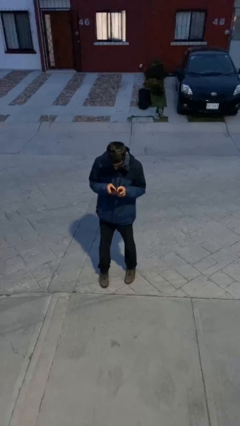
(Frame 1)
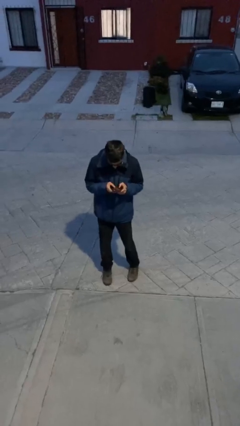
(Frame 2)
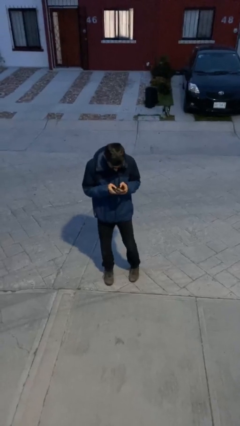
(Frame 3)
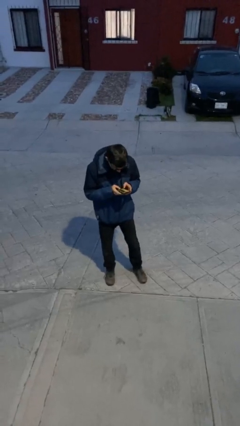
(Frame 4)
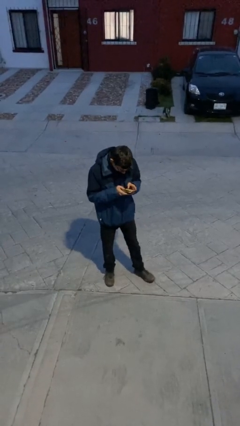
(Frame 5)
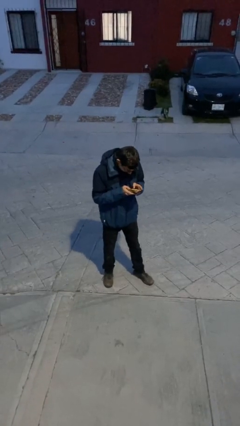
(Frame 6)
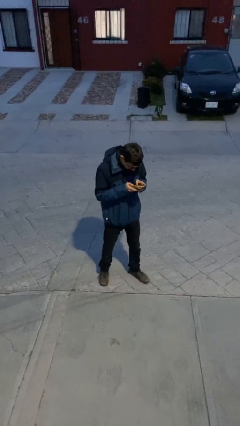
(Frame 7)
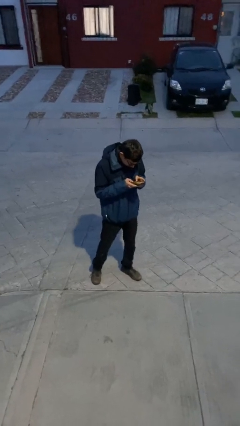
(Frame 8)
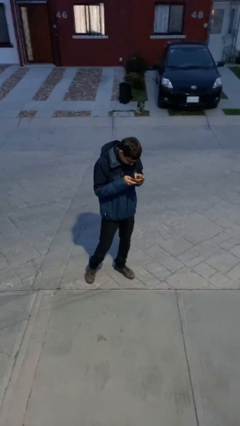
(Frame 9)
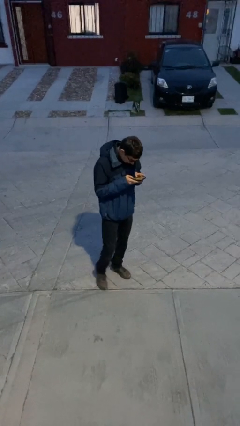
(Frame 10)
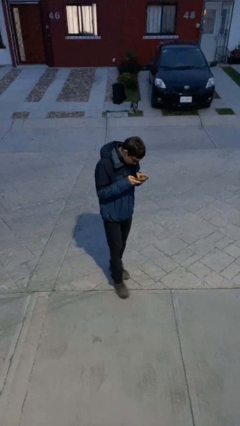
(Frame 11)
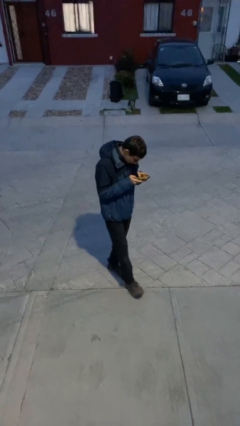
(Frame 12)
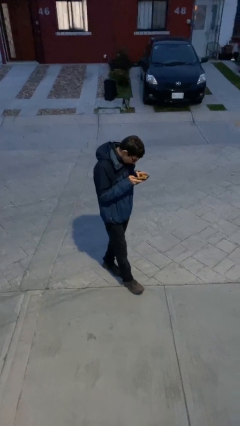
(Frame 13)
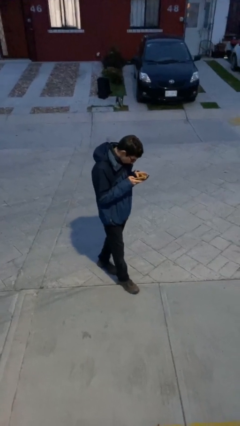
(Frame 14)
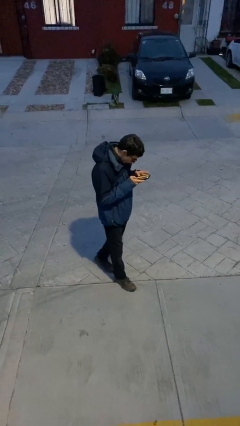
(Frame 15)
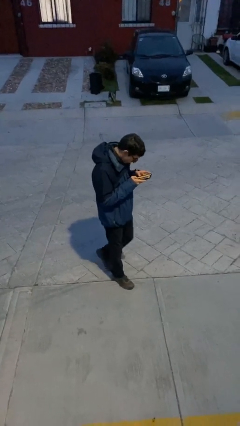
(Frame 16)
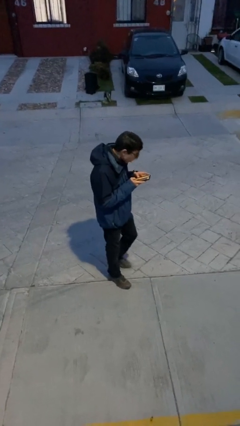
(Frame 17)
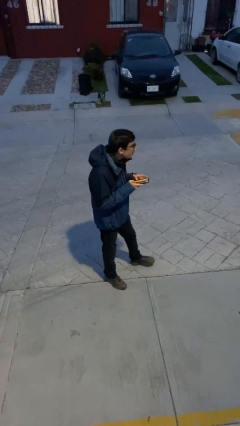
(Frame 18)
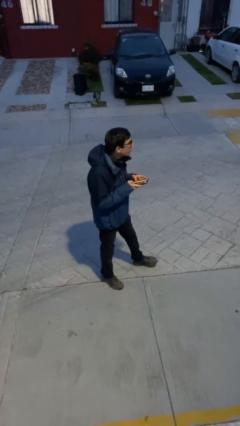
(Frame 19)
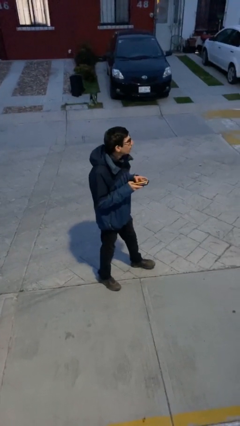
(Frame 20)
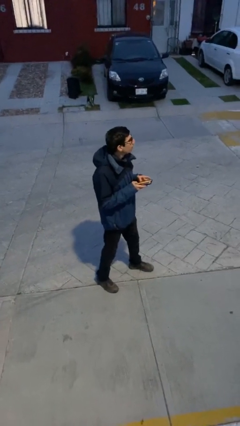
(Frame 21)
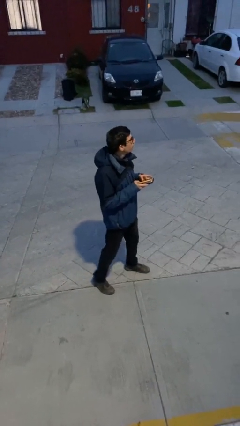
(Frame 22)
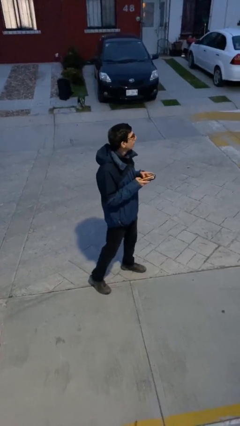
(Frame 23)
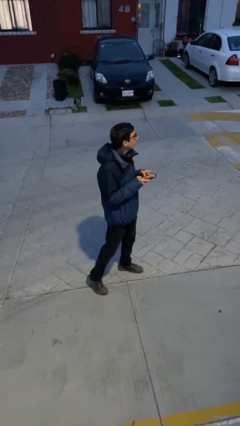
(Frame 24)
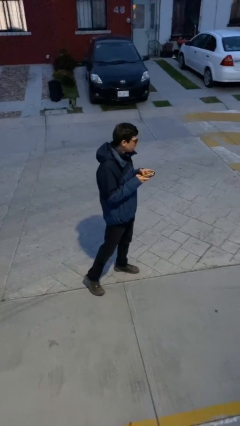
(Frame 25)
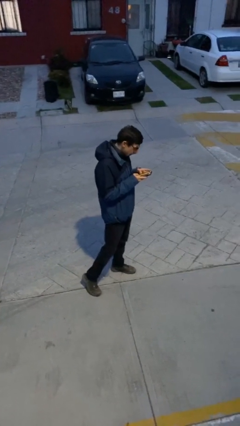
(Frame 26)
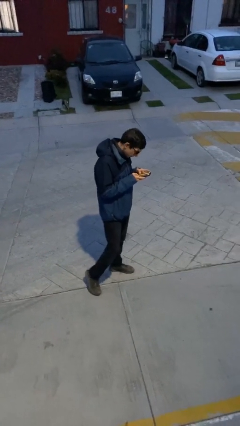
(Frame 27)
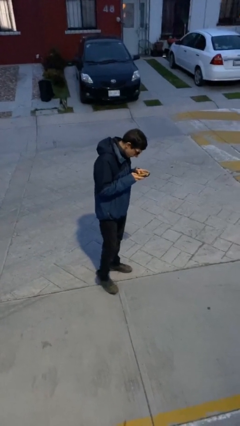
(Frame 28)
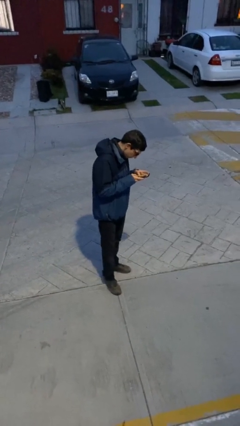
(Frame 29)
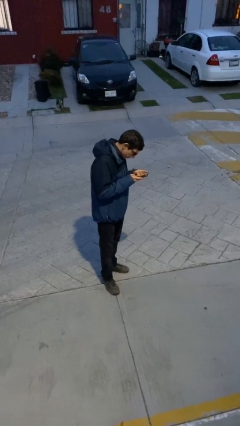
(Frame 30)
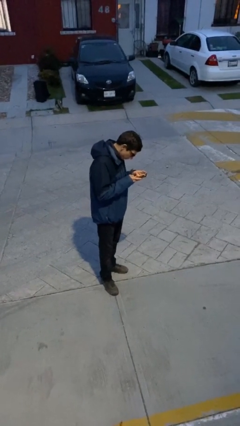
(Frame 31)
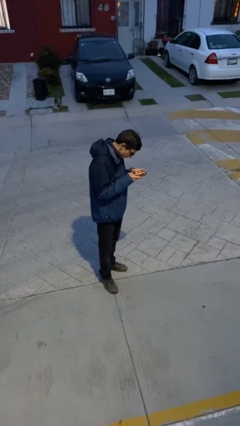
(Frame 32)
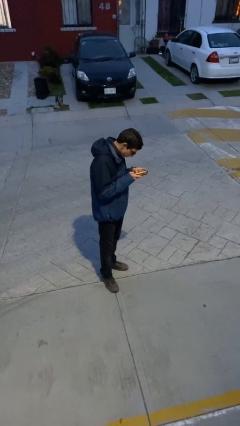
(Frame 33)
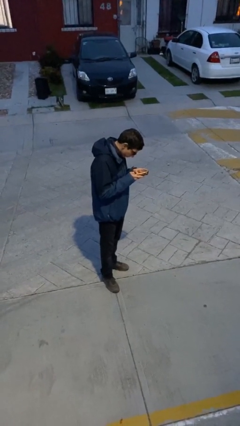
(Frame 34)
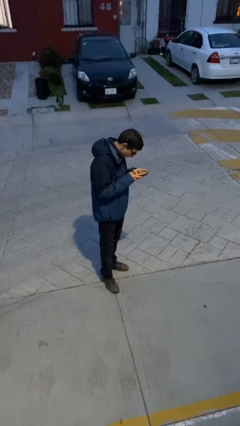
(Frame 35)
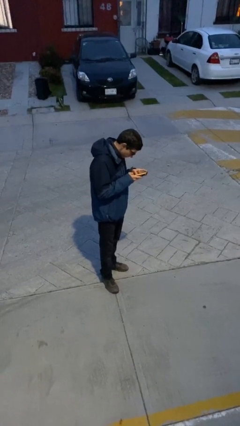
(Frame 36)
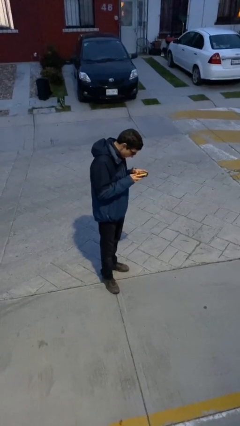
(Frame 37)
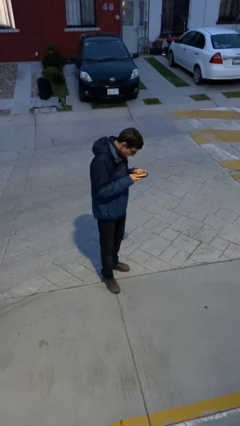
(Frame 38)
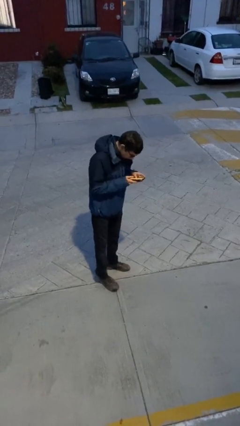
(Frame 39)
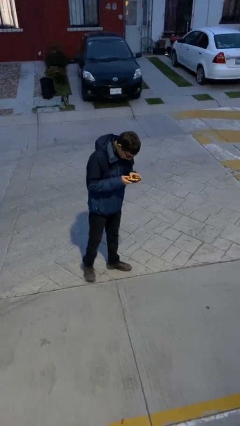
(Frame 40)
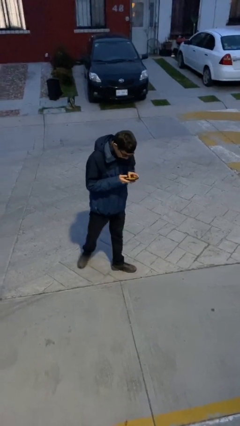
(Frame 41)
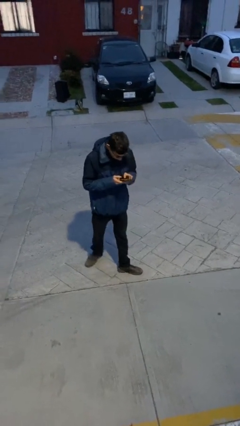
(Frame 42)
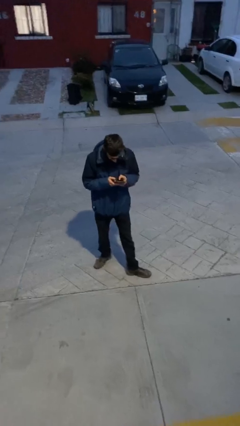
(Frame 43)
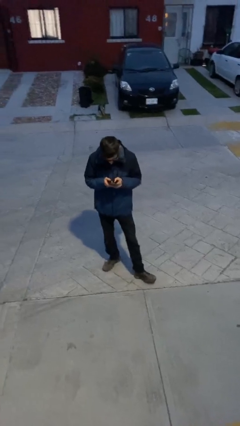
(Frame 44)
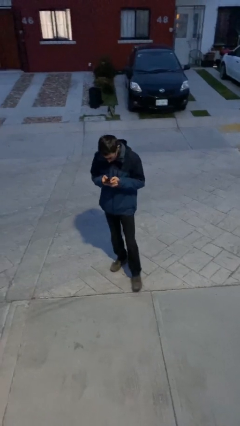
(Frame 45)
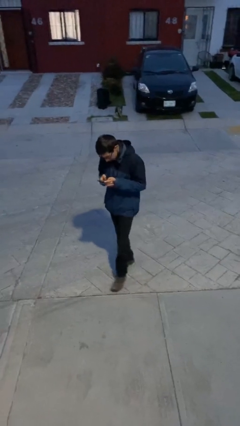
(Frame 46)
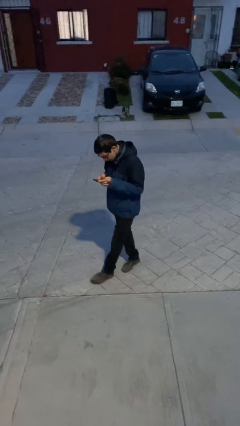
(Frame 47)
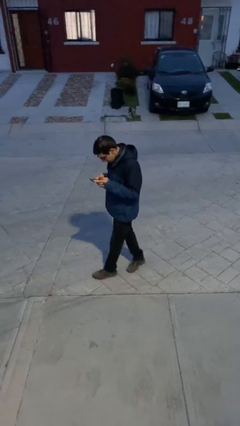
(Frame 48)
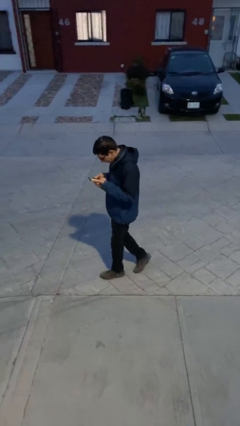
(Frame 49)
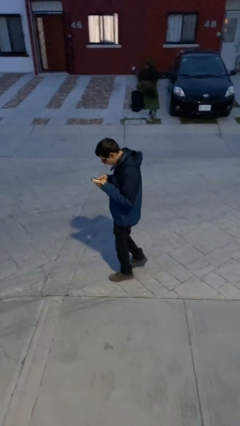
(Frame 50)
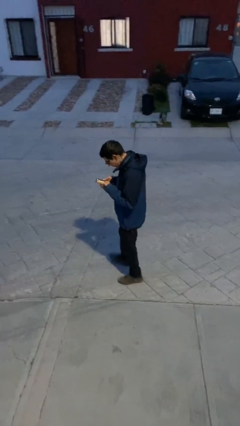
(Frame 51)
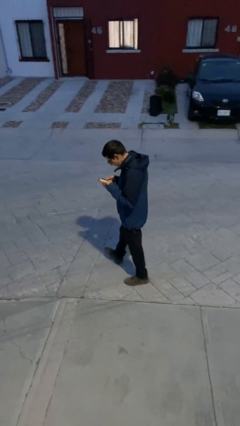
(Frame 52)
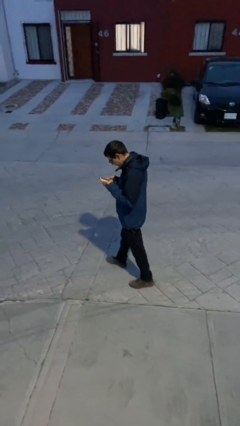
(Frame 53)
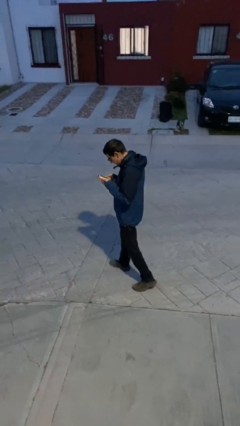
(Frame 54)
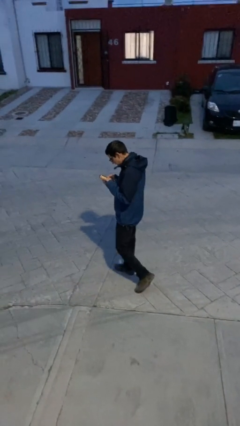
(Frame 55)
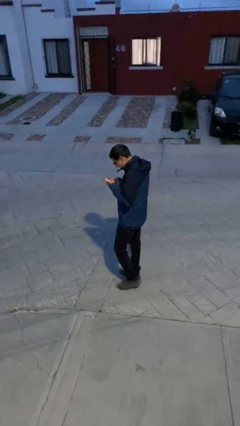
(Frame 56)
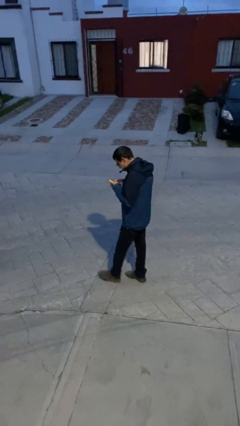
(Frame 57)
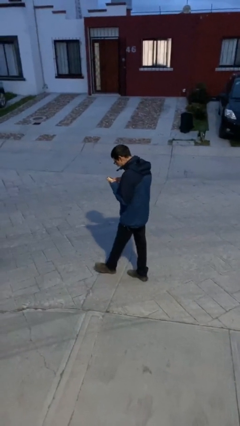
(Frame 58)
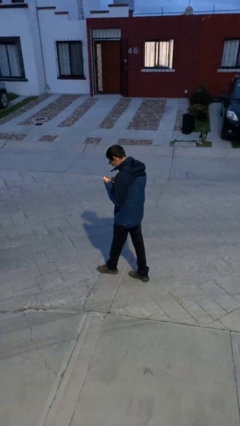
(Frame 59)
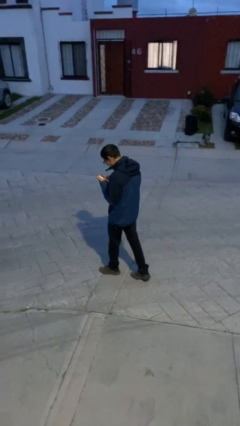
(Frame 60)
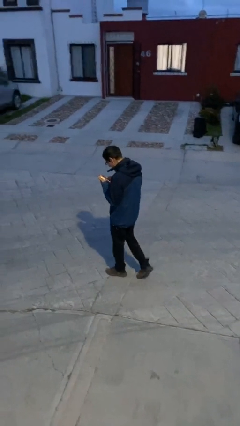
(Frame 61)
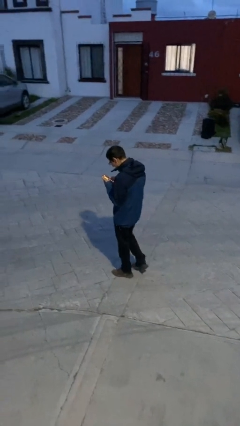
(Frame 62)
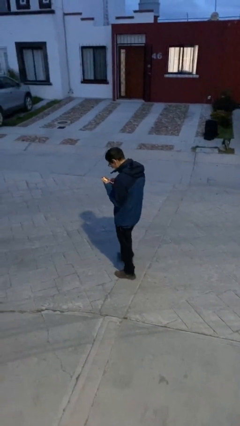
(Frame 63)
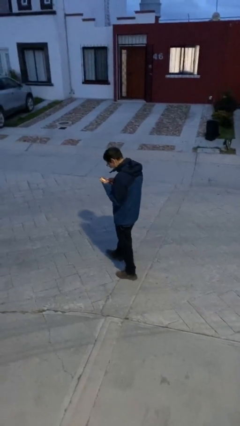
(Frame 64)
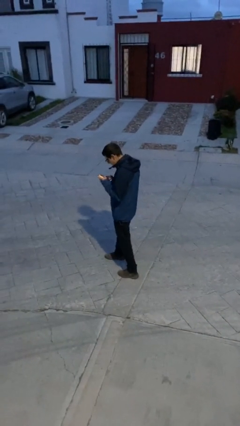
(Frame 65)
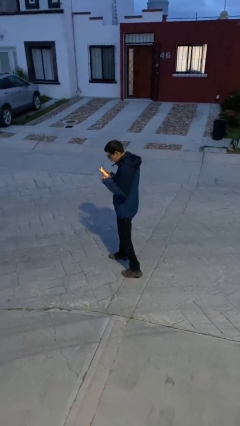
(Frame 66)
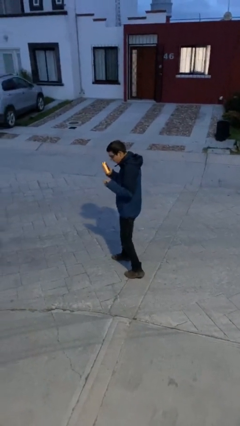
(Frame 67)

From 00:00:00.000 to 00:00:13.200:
person texts on phone

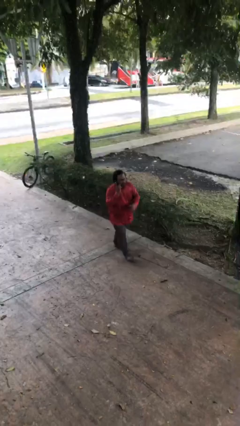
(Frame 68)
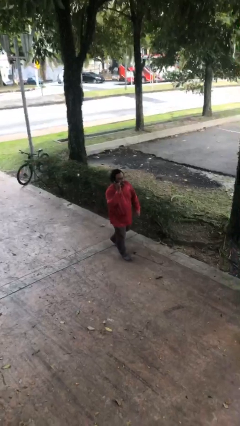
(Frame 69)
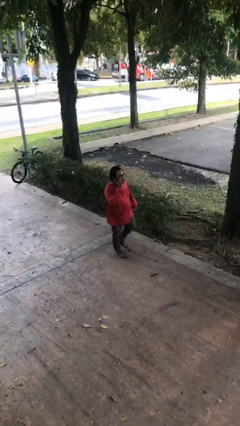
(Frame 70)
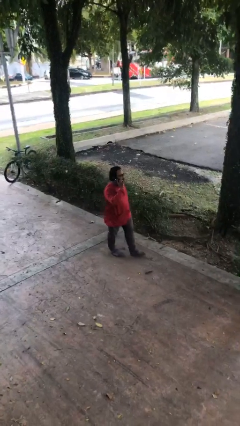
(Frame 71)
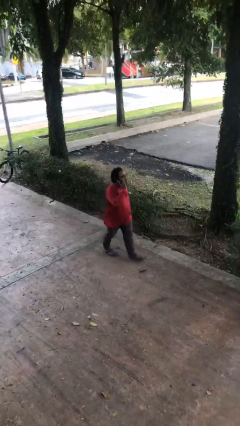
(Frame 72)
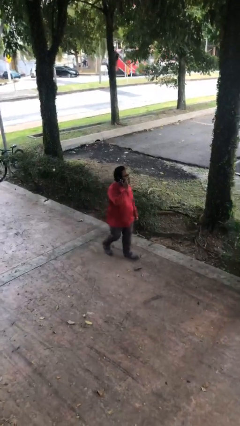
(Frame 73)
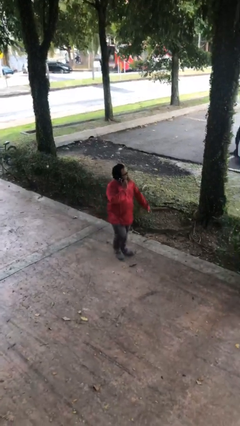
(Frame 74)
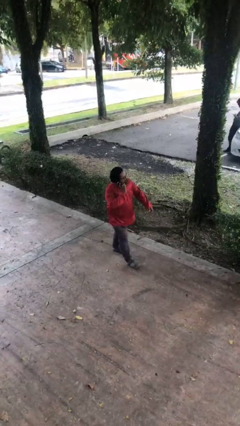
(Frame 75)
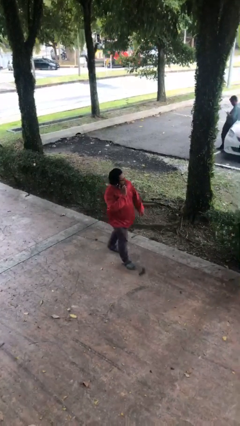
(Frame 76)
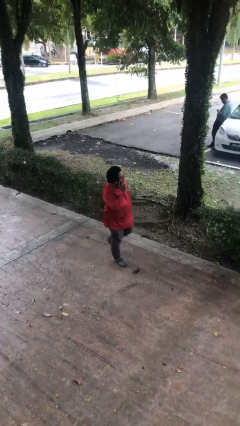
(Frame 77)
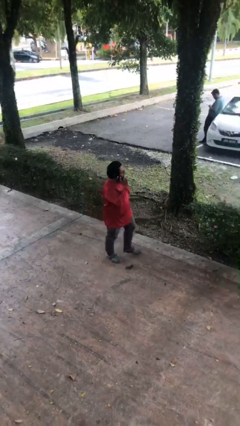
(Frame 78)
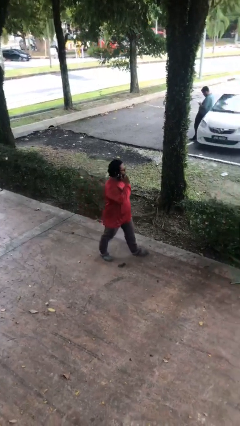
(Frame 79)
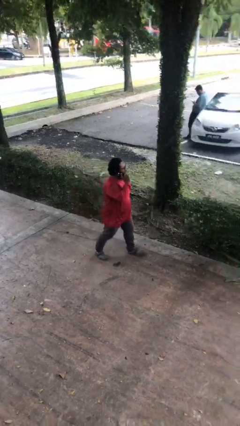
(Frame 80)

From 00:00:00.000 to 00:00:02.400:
person talks on phone

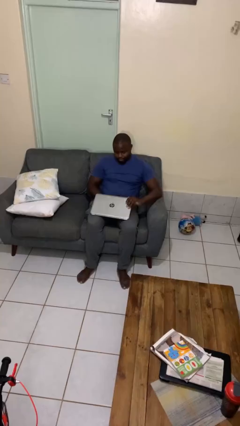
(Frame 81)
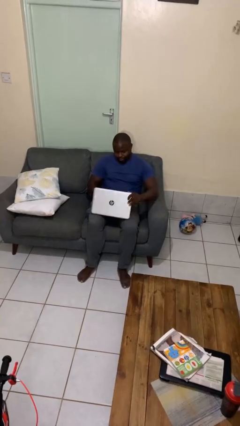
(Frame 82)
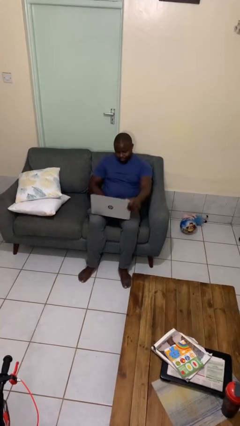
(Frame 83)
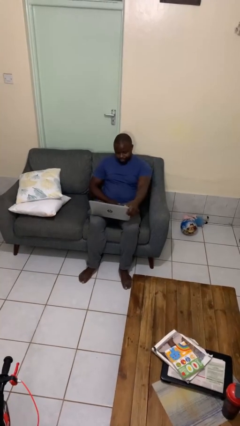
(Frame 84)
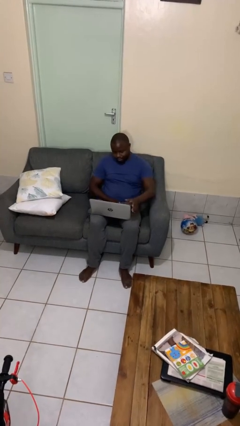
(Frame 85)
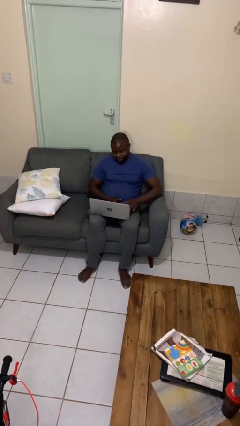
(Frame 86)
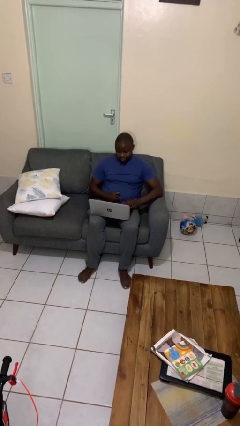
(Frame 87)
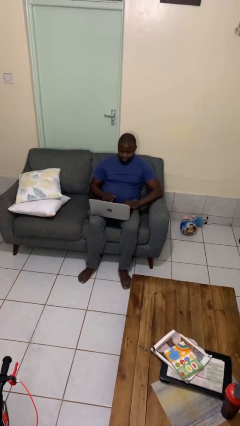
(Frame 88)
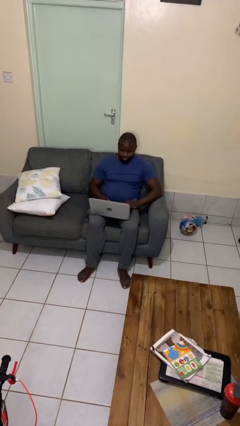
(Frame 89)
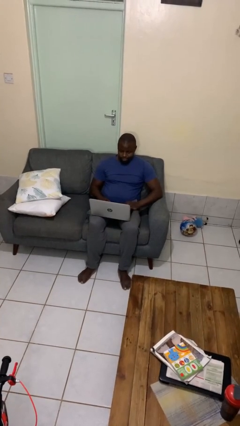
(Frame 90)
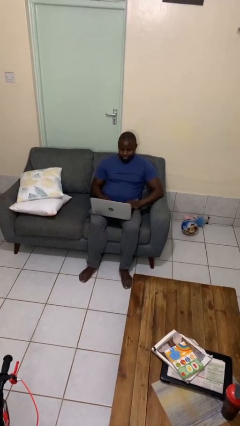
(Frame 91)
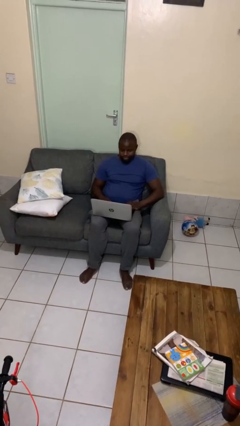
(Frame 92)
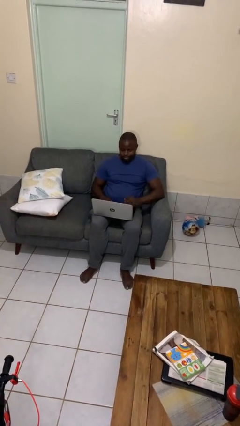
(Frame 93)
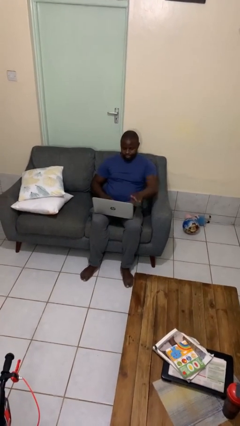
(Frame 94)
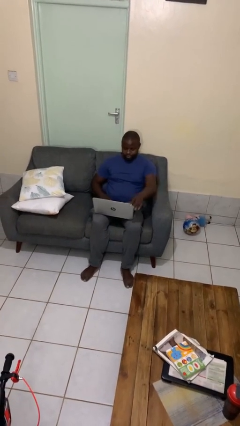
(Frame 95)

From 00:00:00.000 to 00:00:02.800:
person opens laptop
